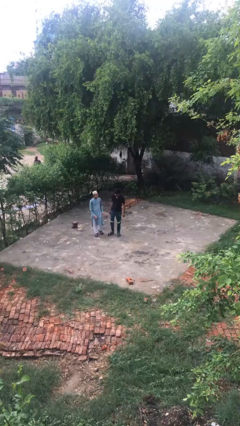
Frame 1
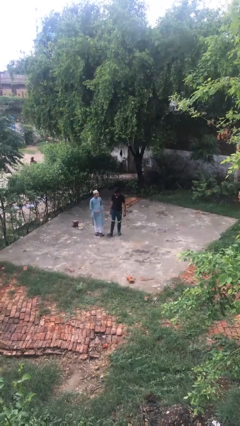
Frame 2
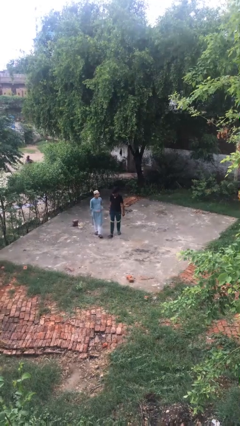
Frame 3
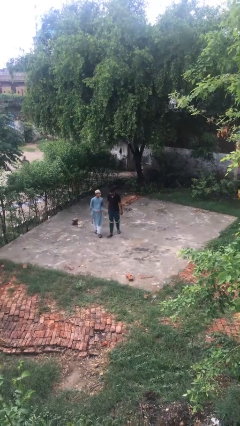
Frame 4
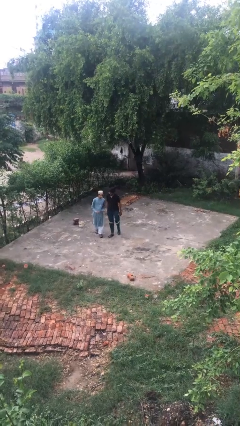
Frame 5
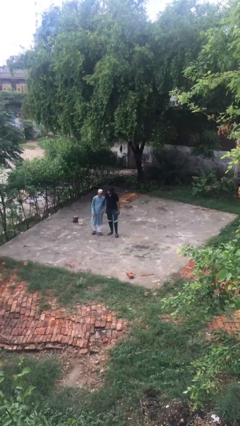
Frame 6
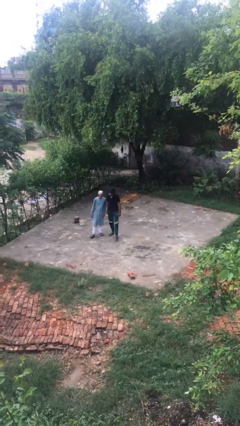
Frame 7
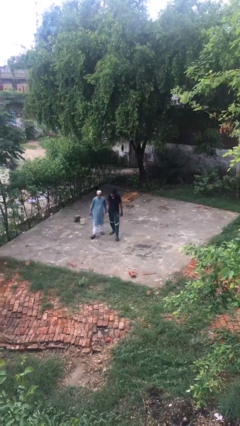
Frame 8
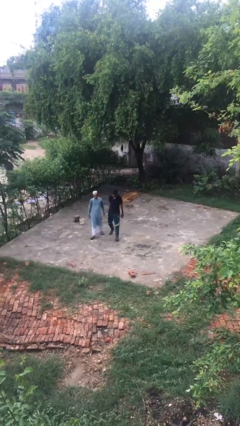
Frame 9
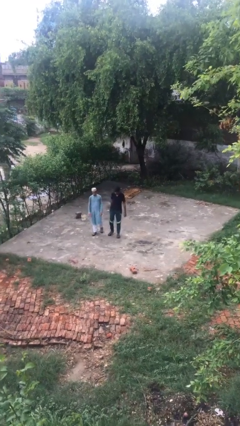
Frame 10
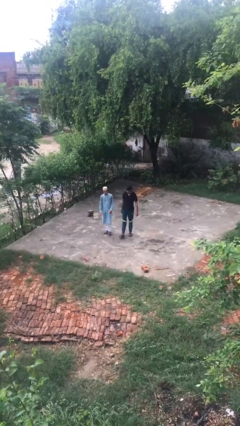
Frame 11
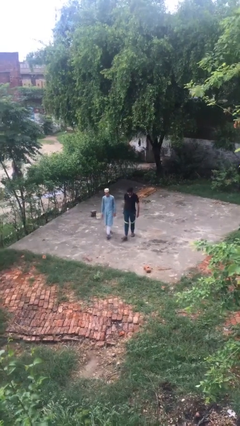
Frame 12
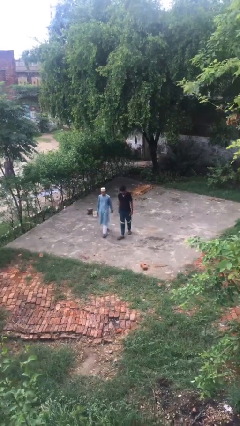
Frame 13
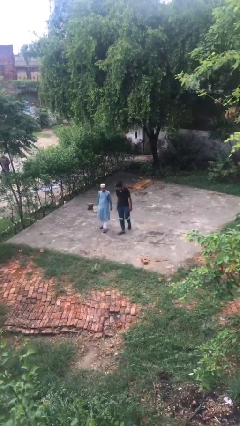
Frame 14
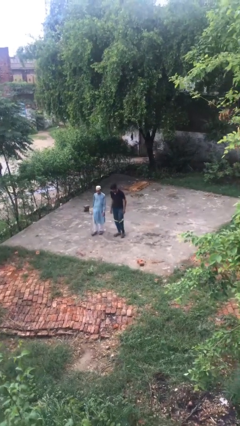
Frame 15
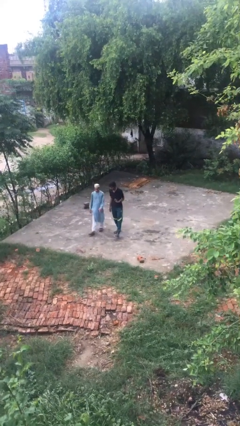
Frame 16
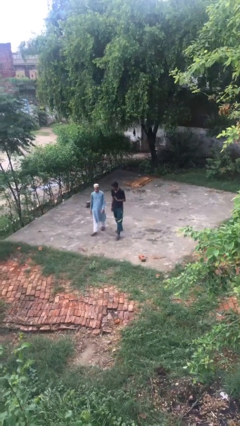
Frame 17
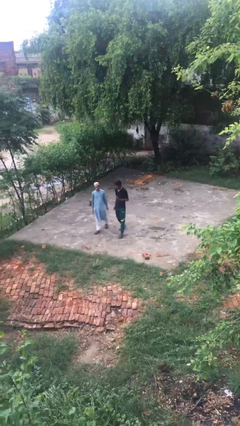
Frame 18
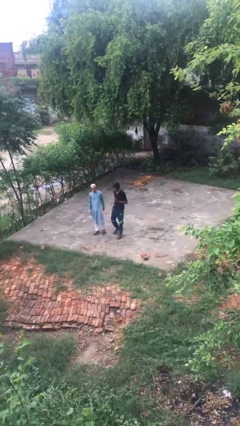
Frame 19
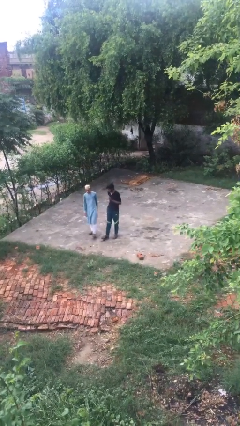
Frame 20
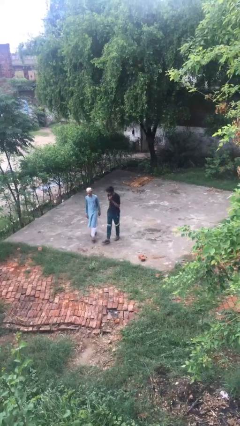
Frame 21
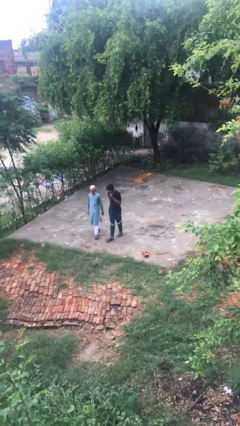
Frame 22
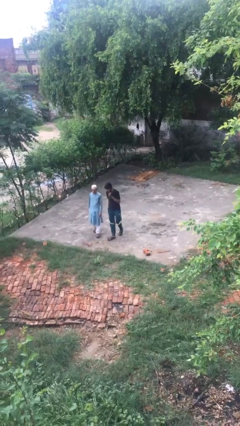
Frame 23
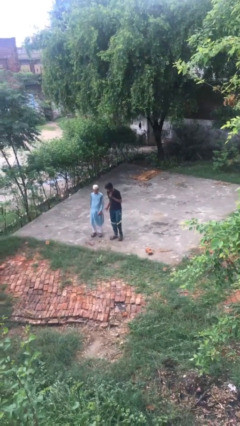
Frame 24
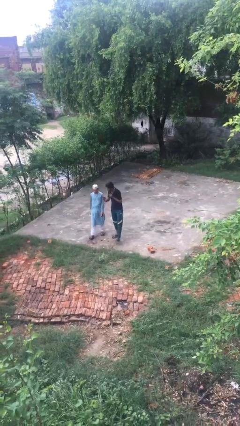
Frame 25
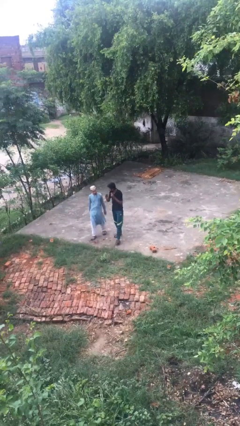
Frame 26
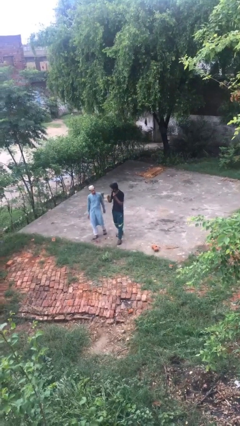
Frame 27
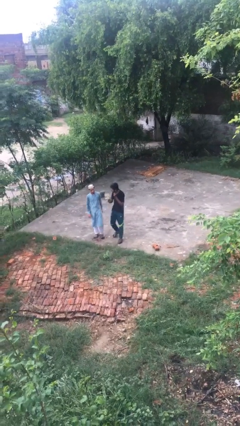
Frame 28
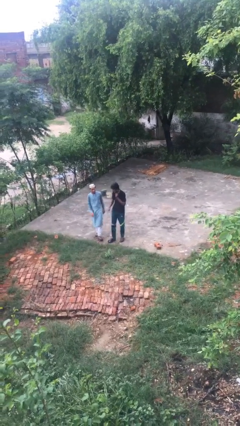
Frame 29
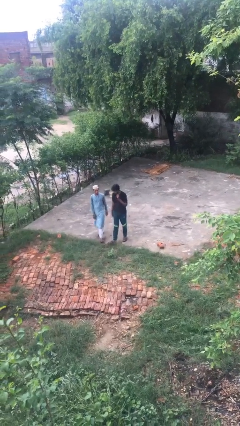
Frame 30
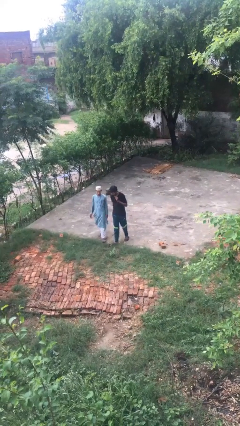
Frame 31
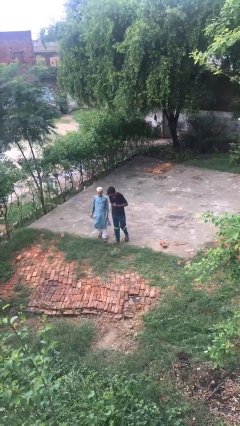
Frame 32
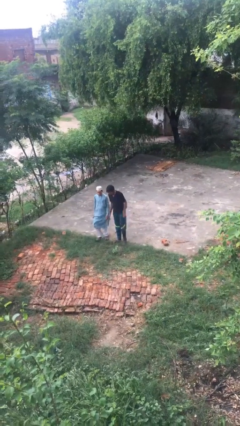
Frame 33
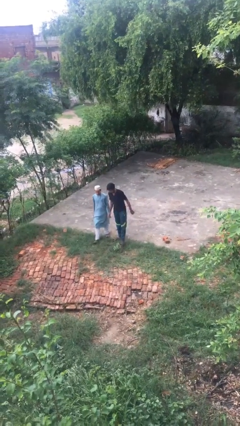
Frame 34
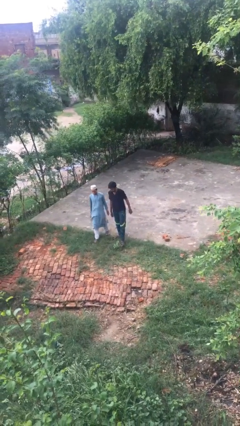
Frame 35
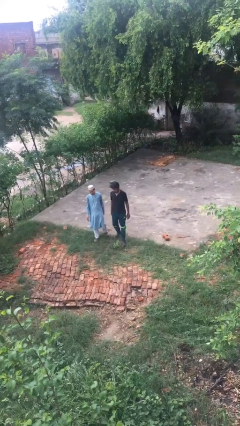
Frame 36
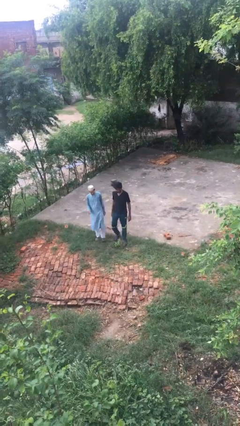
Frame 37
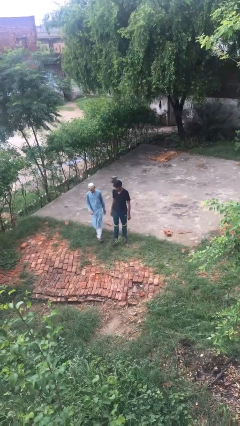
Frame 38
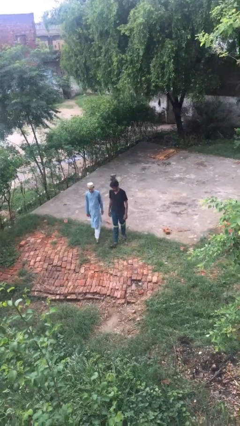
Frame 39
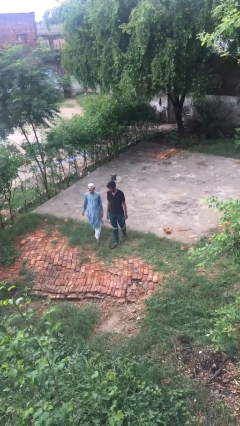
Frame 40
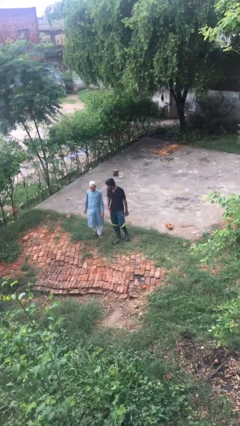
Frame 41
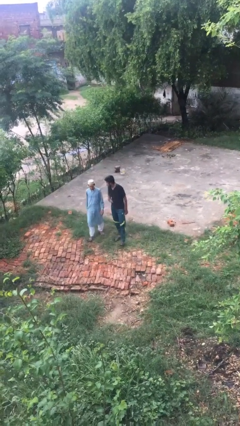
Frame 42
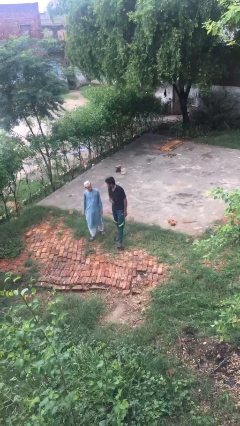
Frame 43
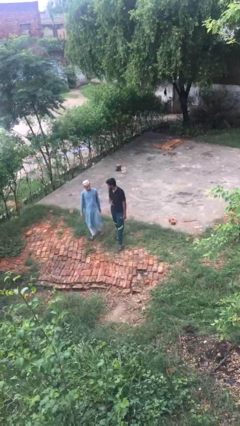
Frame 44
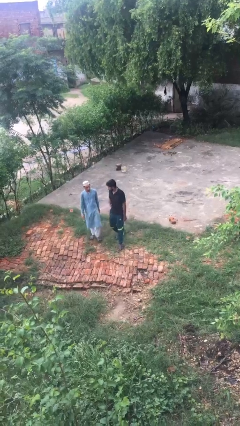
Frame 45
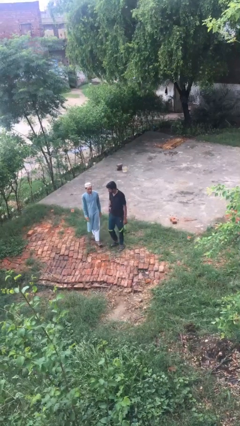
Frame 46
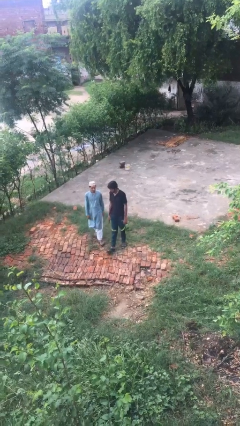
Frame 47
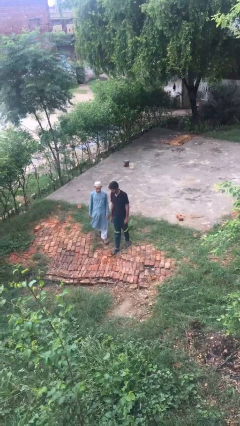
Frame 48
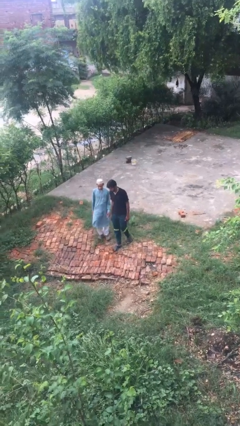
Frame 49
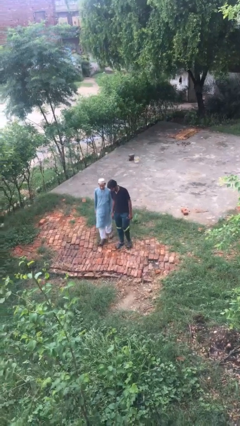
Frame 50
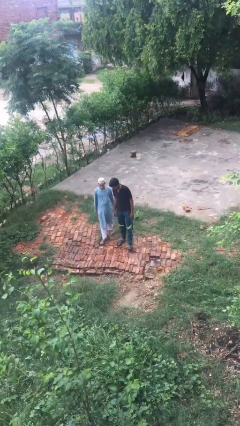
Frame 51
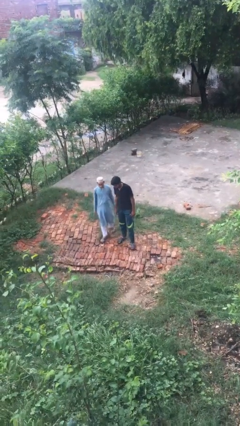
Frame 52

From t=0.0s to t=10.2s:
person talks to person

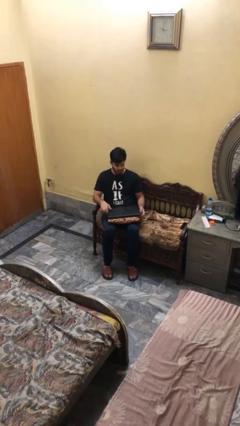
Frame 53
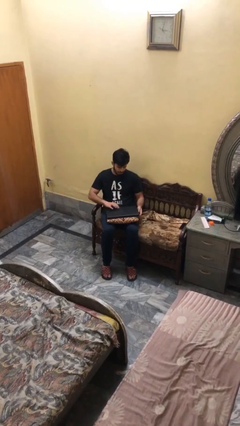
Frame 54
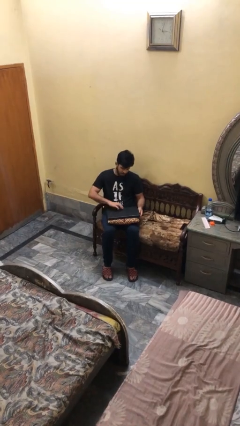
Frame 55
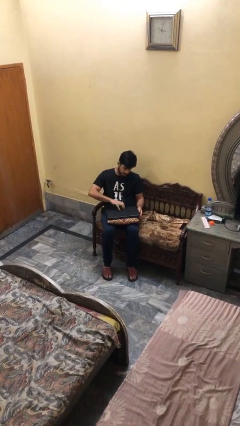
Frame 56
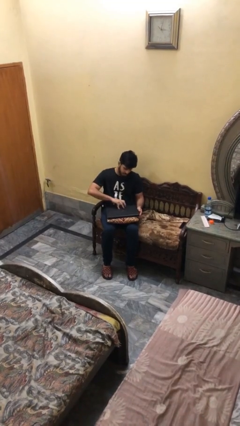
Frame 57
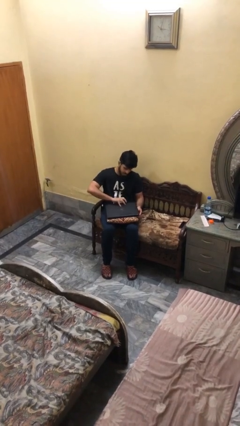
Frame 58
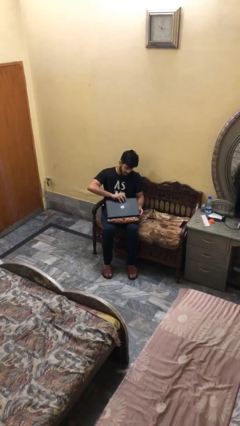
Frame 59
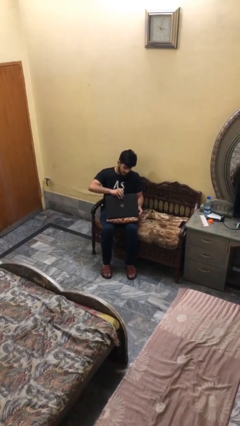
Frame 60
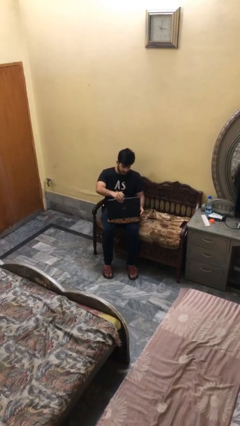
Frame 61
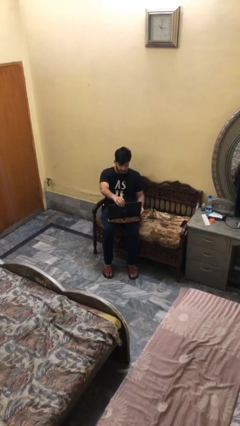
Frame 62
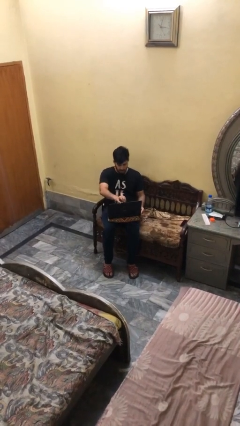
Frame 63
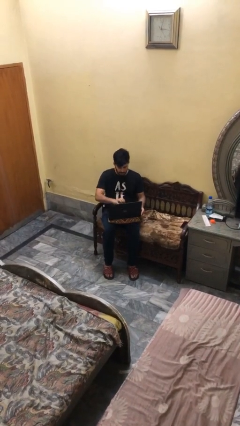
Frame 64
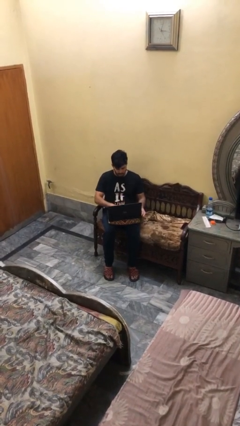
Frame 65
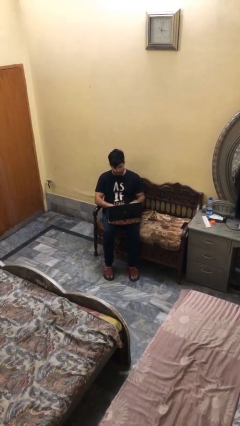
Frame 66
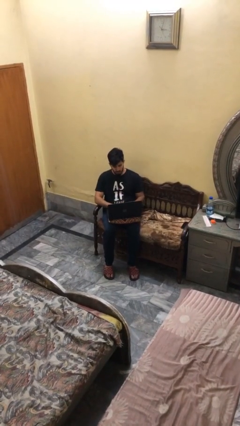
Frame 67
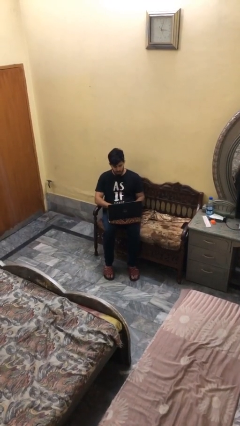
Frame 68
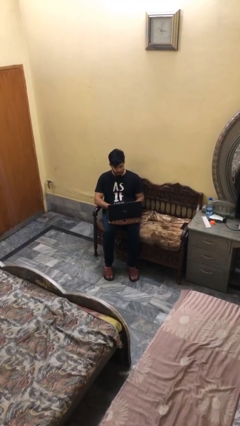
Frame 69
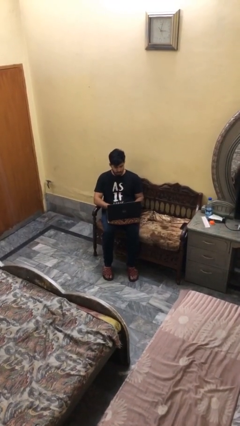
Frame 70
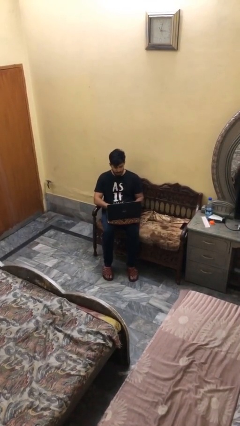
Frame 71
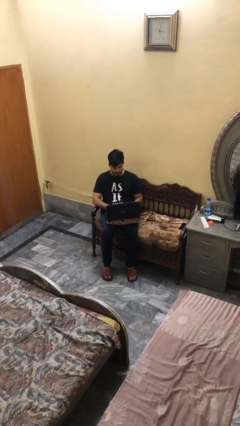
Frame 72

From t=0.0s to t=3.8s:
person opens laptop

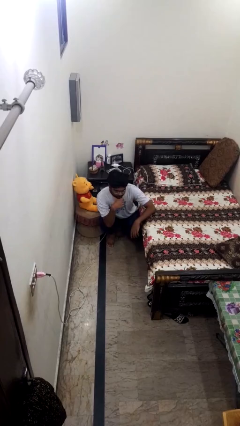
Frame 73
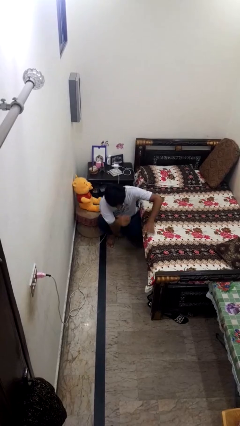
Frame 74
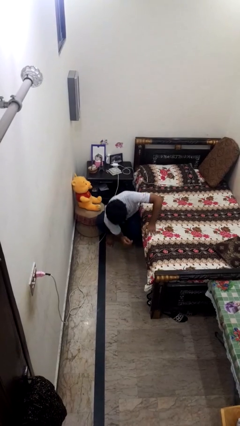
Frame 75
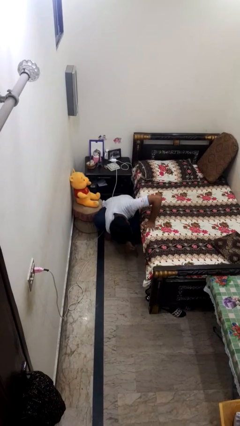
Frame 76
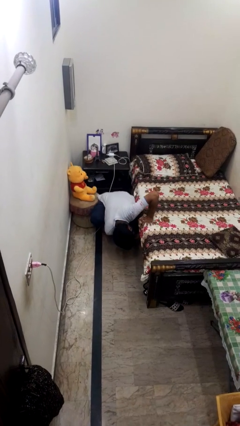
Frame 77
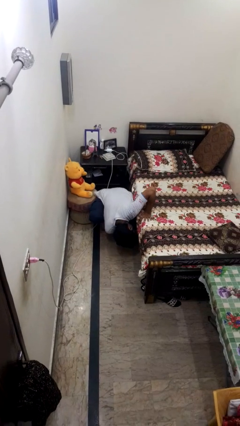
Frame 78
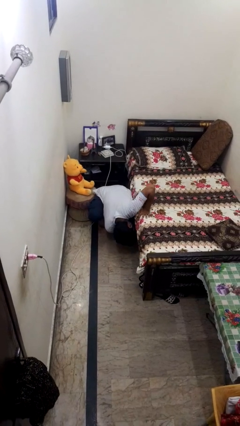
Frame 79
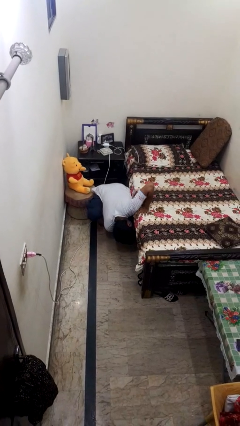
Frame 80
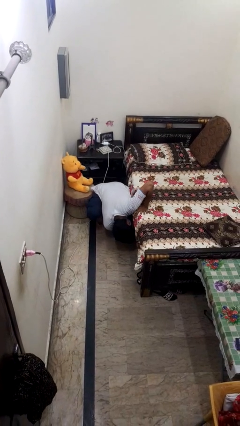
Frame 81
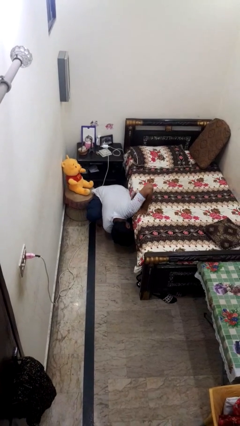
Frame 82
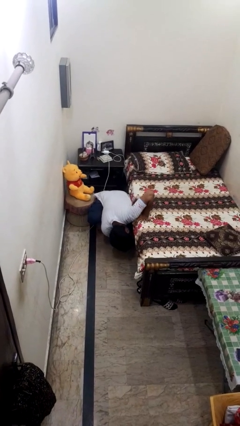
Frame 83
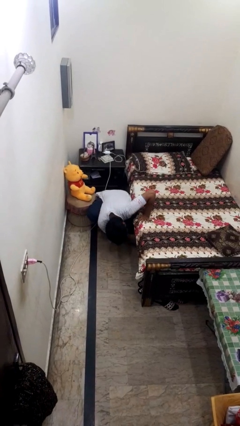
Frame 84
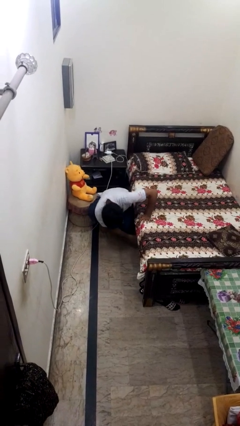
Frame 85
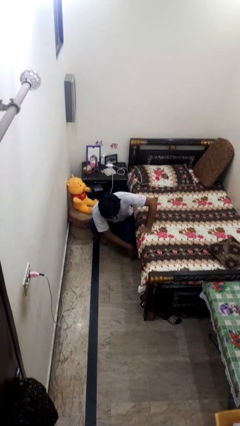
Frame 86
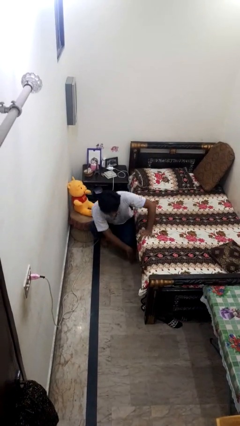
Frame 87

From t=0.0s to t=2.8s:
person searches under bed

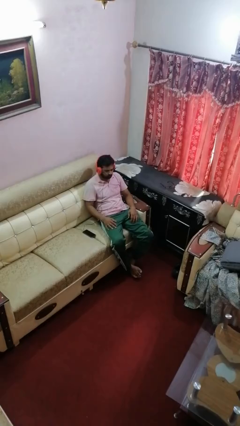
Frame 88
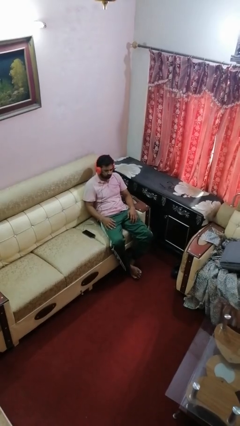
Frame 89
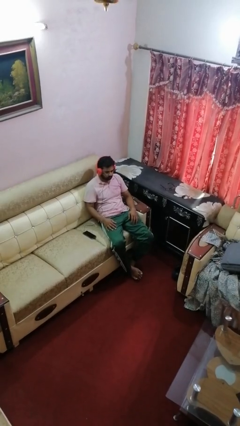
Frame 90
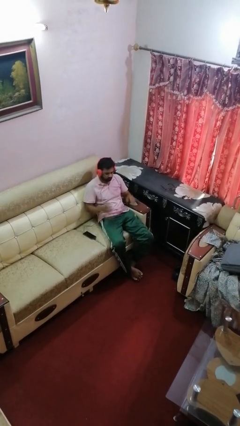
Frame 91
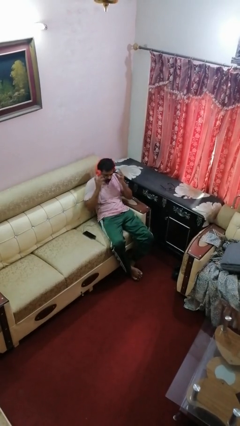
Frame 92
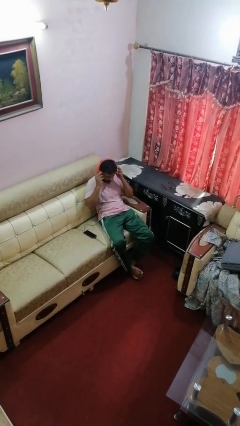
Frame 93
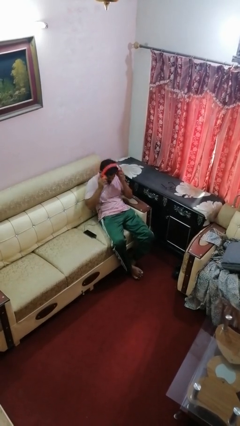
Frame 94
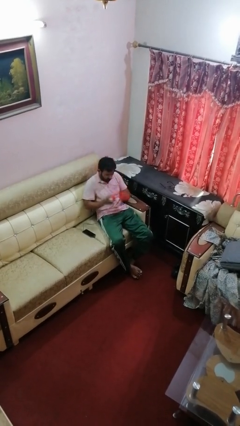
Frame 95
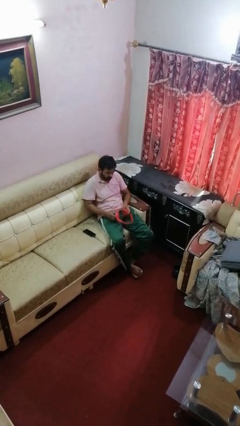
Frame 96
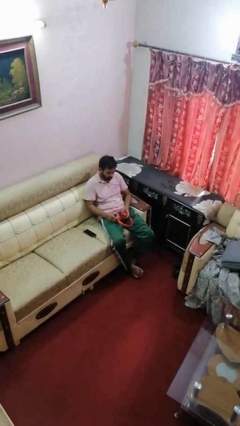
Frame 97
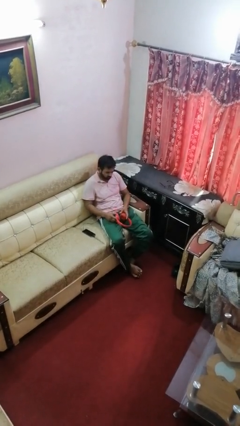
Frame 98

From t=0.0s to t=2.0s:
person takes off headphones
